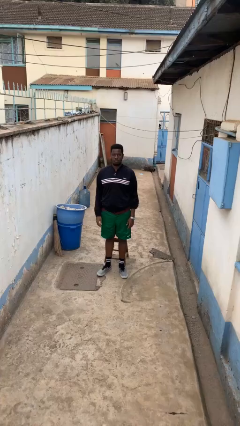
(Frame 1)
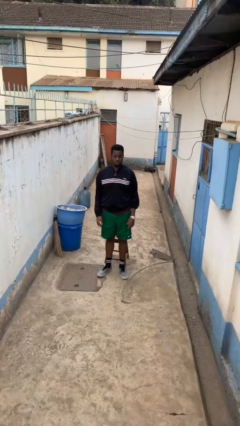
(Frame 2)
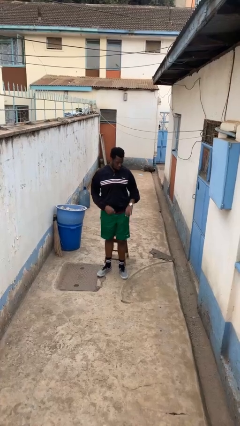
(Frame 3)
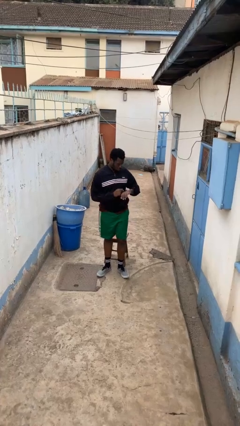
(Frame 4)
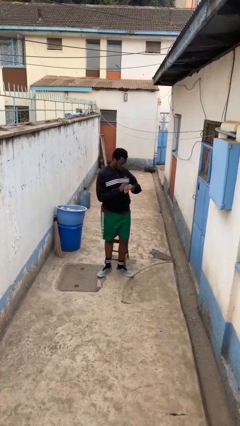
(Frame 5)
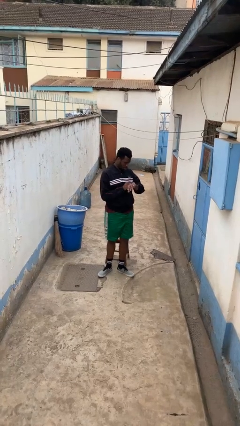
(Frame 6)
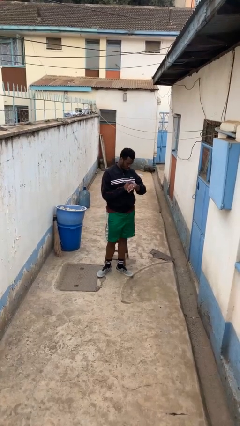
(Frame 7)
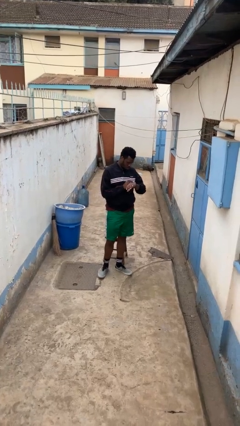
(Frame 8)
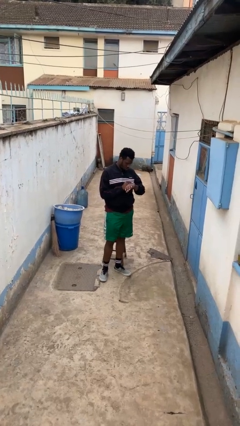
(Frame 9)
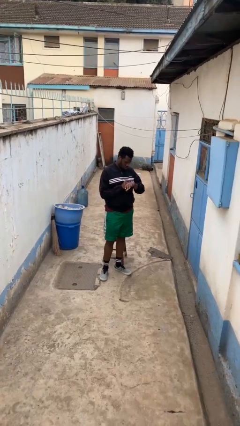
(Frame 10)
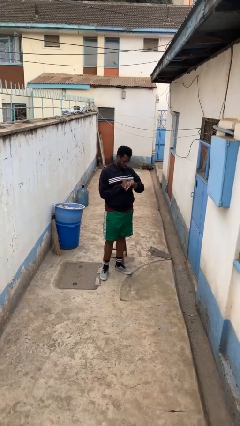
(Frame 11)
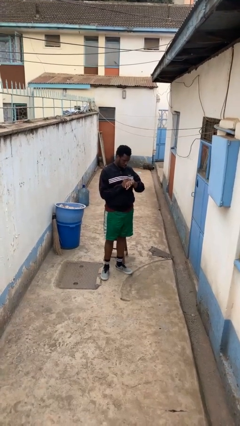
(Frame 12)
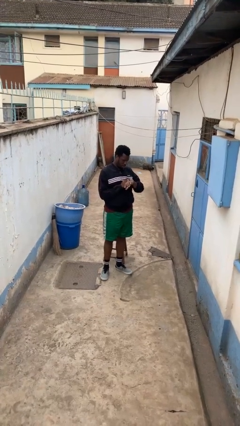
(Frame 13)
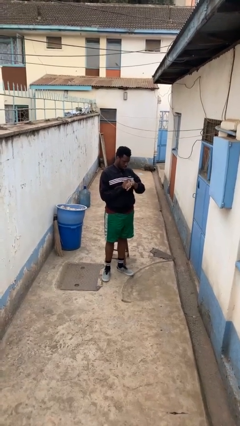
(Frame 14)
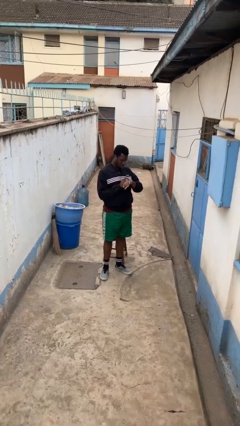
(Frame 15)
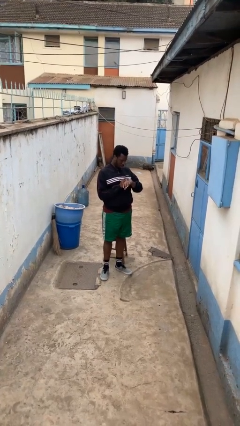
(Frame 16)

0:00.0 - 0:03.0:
person looks at wristwatch

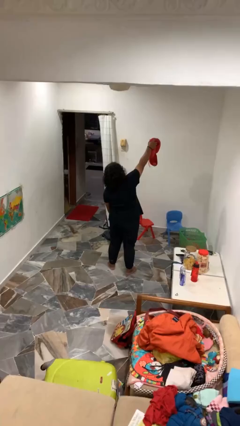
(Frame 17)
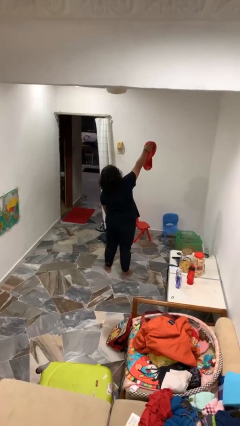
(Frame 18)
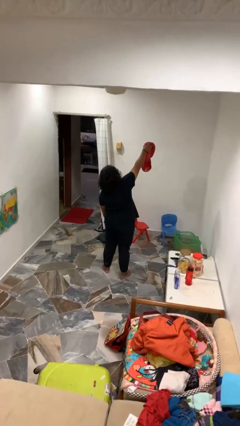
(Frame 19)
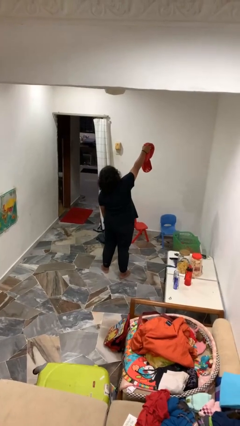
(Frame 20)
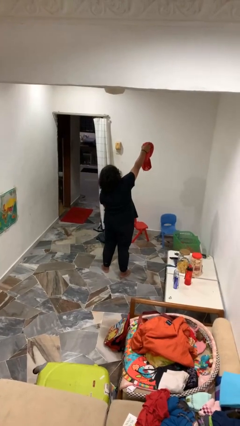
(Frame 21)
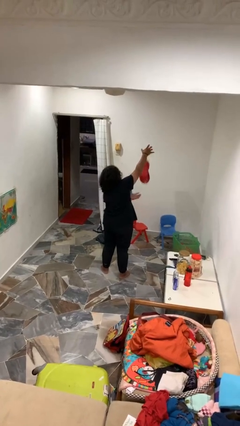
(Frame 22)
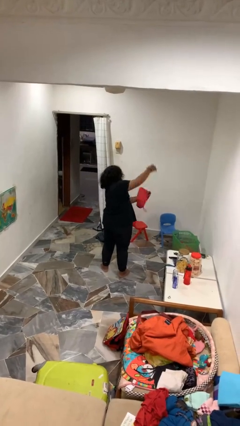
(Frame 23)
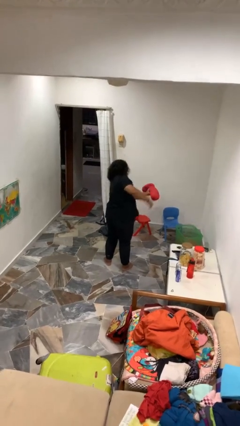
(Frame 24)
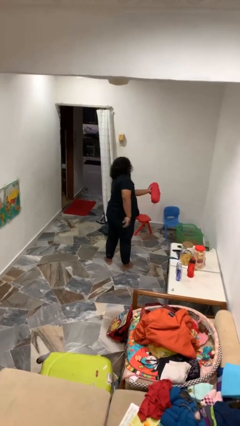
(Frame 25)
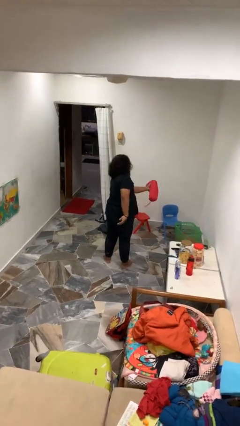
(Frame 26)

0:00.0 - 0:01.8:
person drops object

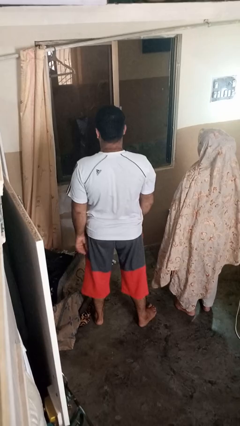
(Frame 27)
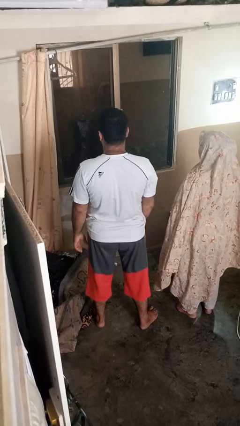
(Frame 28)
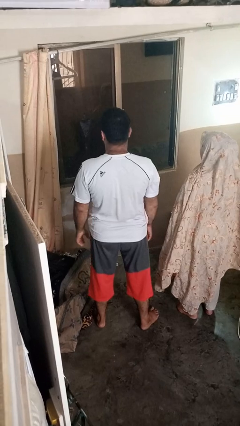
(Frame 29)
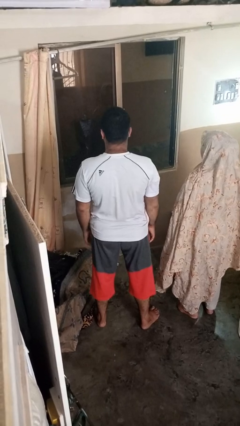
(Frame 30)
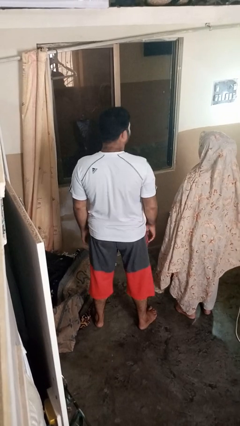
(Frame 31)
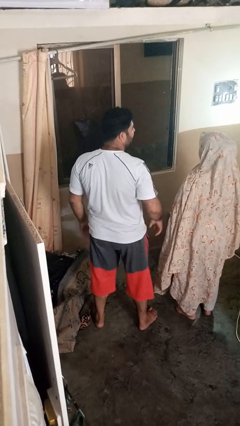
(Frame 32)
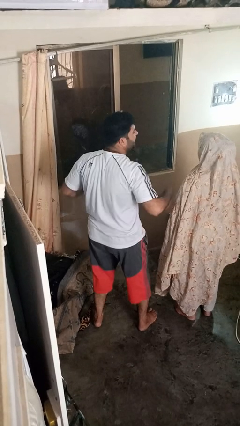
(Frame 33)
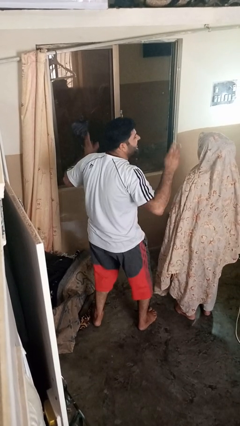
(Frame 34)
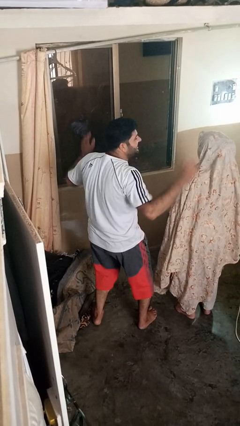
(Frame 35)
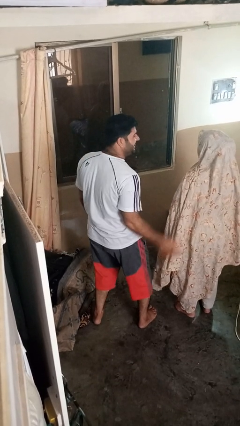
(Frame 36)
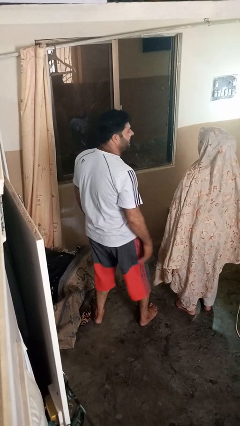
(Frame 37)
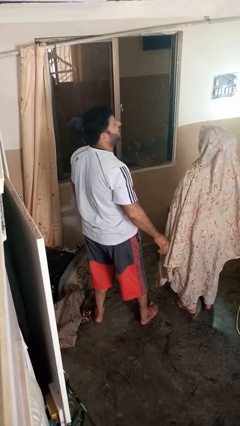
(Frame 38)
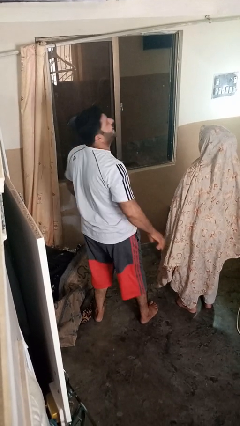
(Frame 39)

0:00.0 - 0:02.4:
person laughs with person

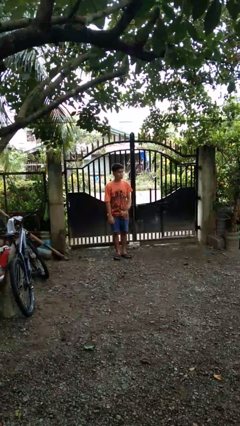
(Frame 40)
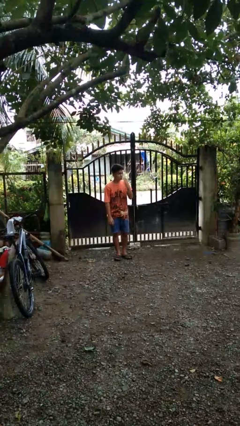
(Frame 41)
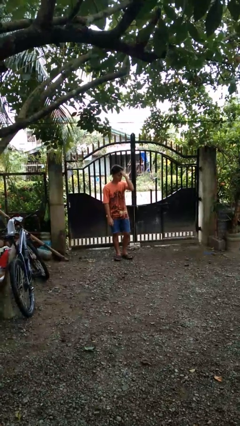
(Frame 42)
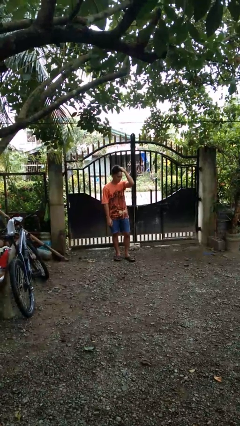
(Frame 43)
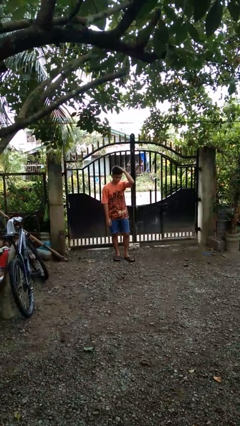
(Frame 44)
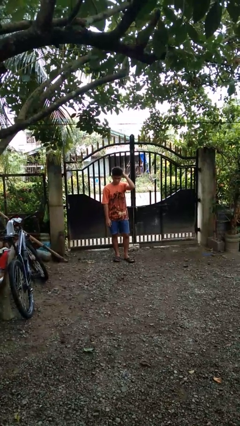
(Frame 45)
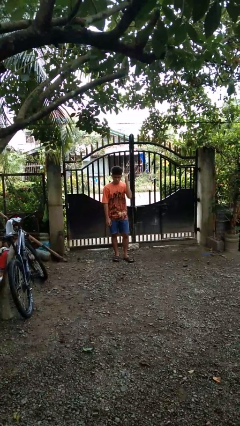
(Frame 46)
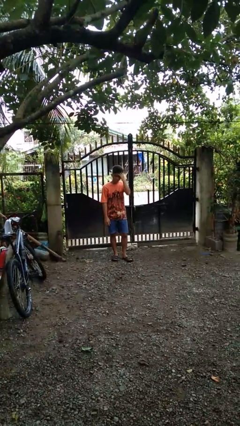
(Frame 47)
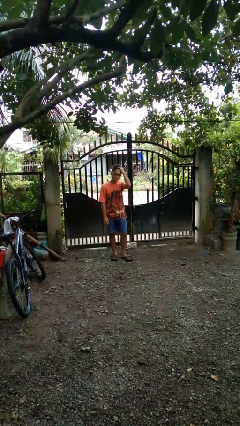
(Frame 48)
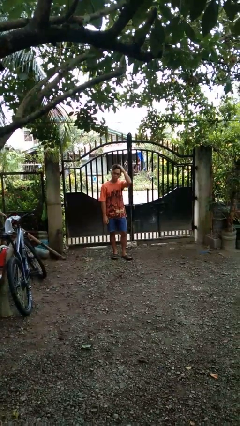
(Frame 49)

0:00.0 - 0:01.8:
person strokes hair

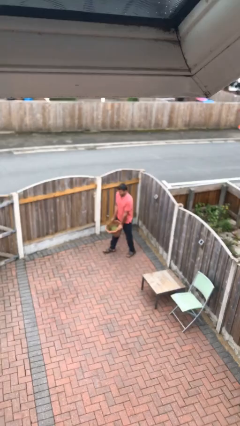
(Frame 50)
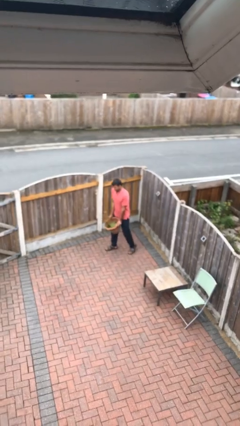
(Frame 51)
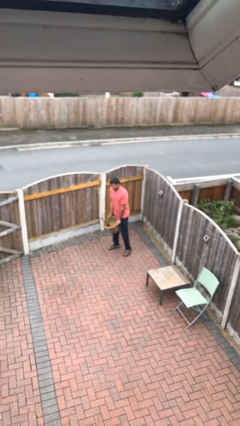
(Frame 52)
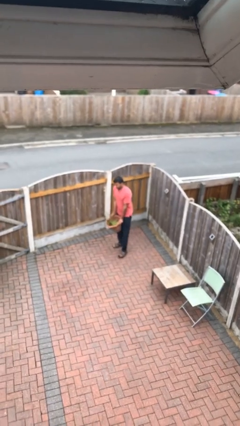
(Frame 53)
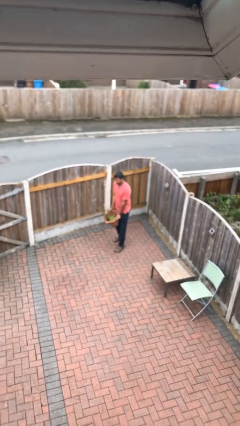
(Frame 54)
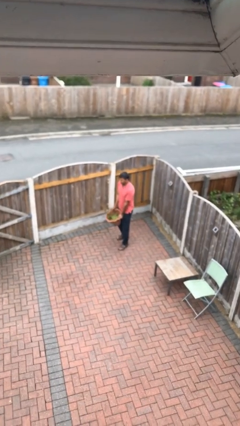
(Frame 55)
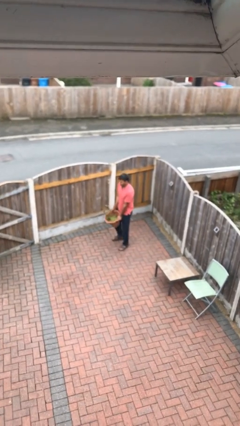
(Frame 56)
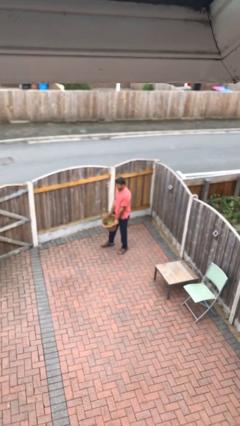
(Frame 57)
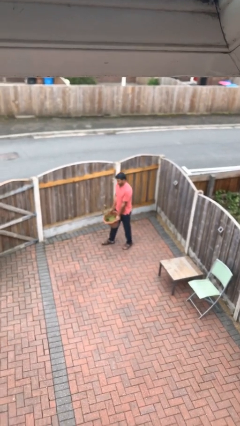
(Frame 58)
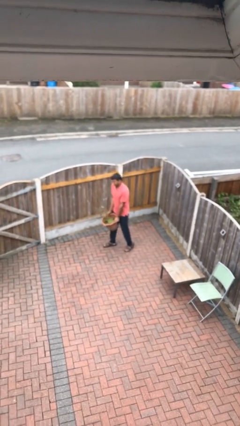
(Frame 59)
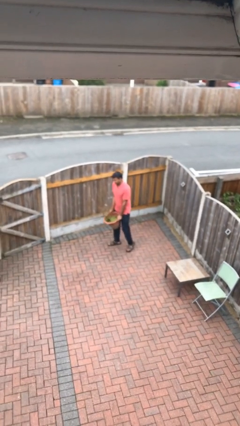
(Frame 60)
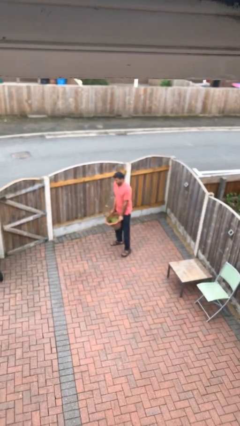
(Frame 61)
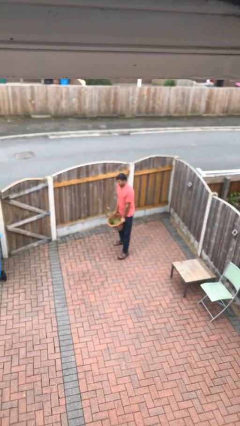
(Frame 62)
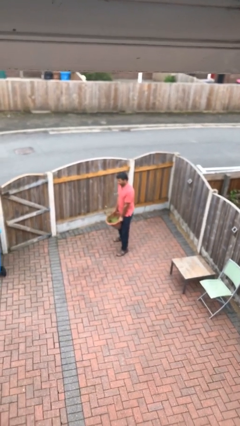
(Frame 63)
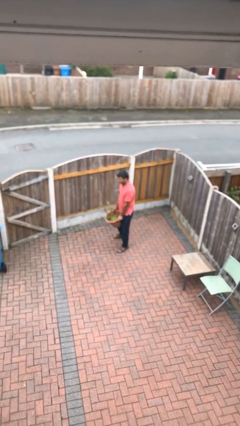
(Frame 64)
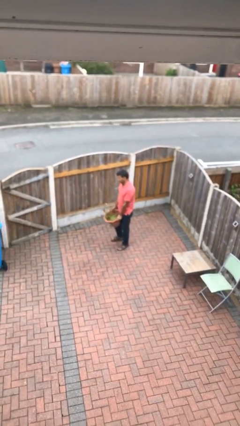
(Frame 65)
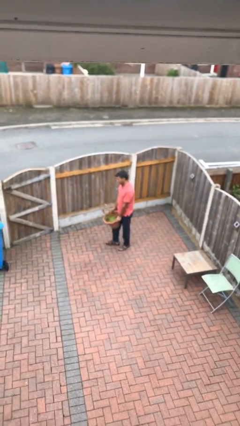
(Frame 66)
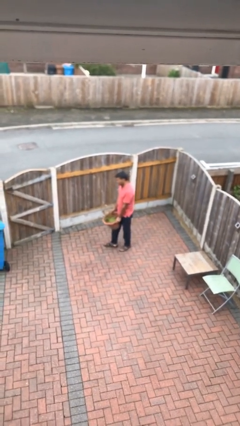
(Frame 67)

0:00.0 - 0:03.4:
person carries heavy object

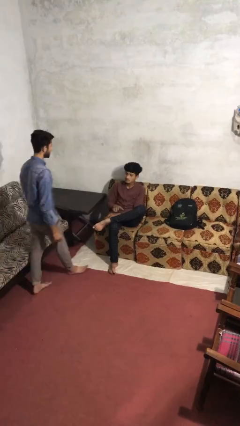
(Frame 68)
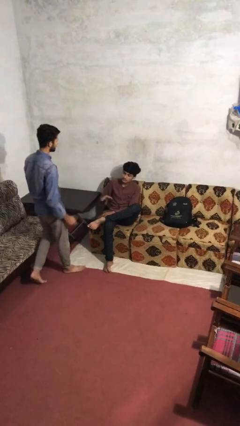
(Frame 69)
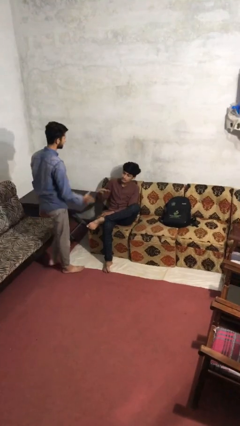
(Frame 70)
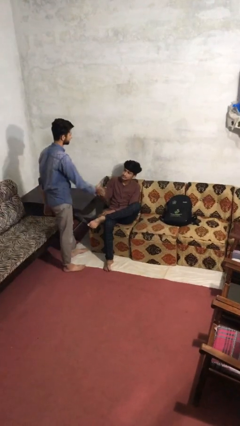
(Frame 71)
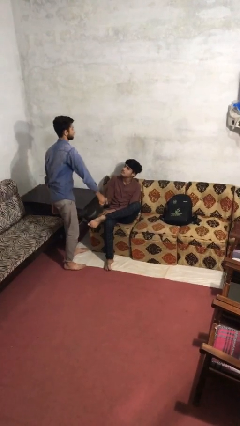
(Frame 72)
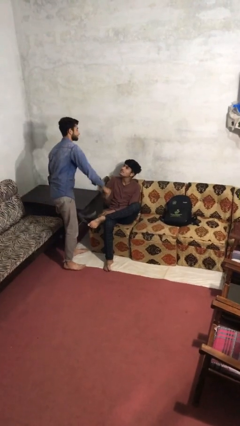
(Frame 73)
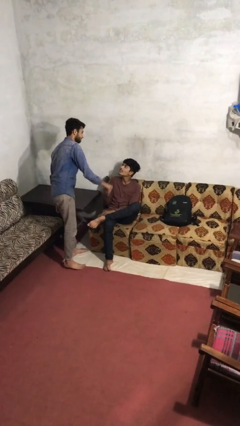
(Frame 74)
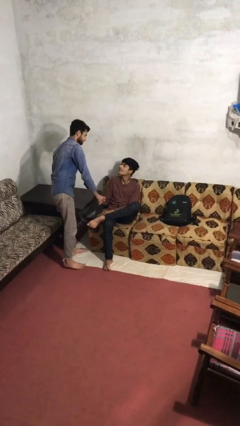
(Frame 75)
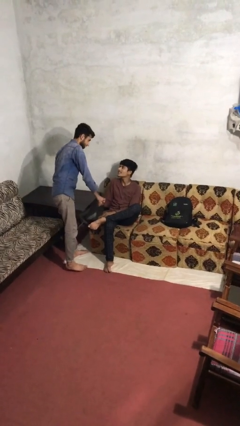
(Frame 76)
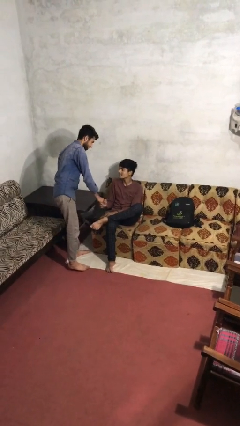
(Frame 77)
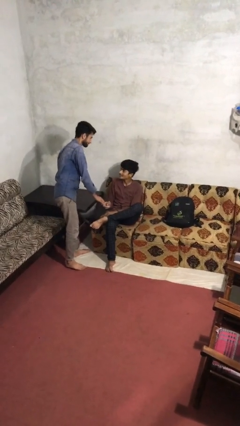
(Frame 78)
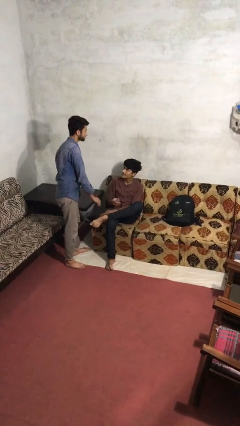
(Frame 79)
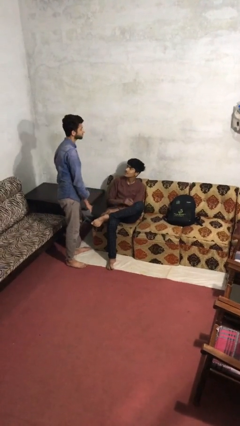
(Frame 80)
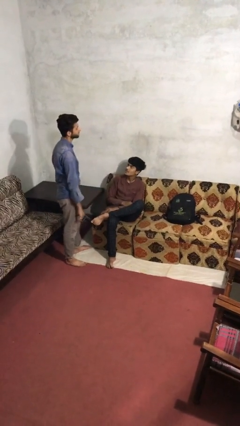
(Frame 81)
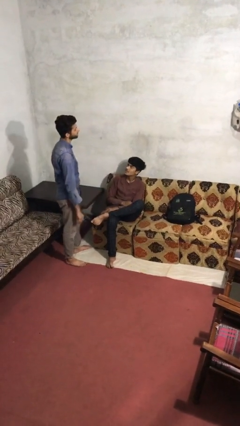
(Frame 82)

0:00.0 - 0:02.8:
person shakes hand

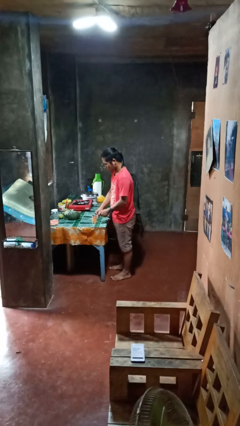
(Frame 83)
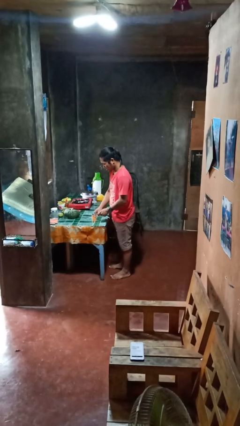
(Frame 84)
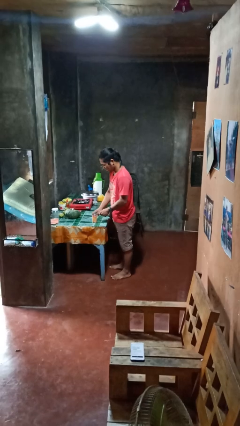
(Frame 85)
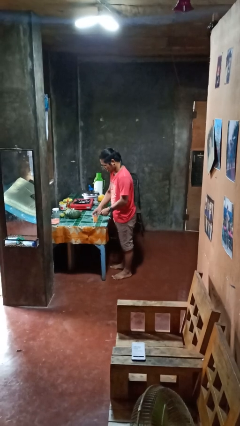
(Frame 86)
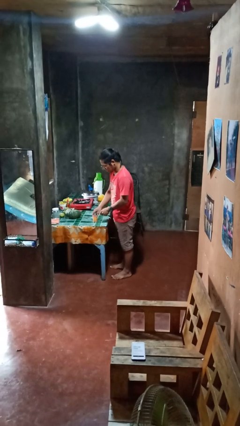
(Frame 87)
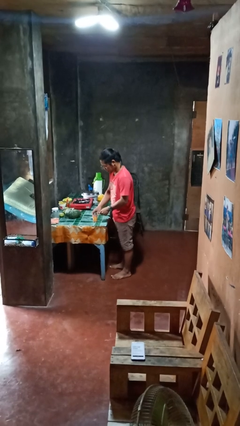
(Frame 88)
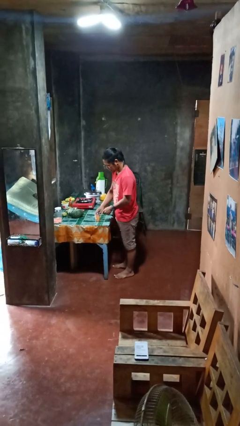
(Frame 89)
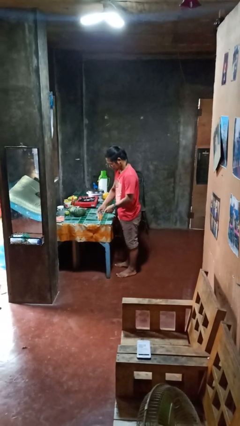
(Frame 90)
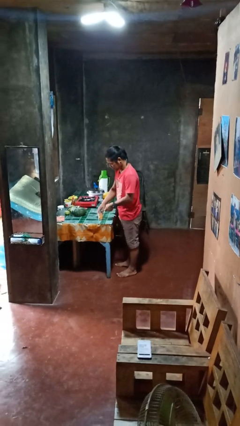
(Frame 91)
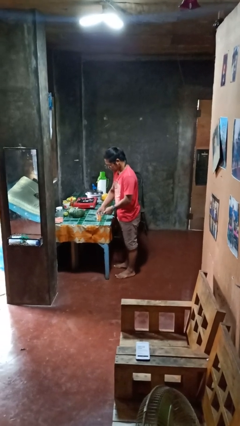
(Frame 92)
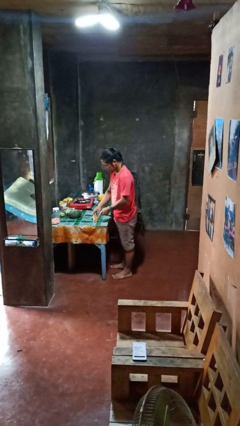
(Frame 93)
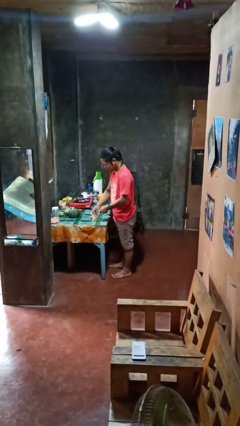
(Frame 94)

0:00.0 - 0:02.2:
person opens can with can opener
